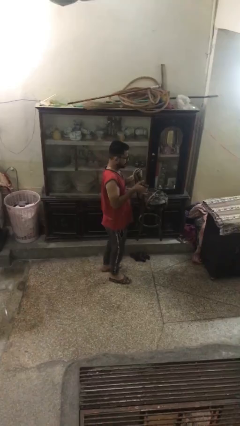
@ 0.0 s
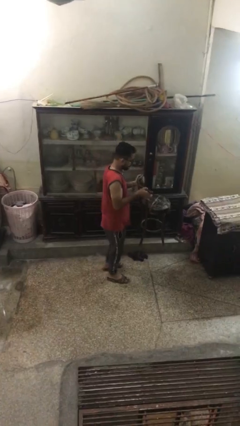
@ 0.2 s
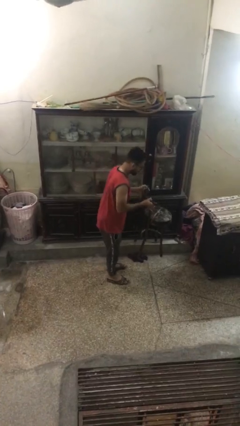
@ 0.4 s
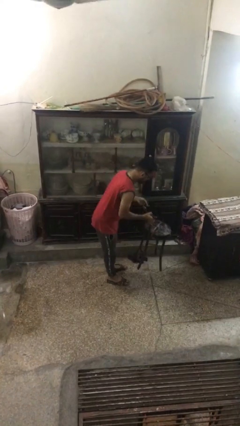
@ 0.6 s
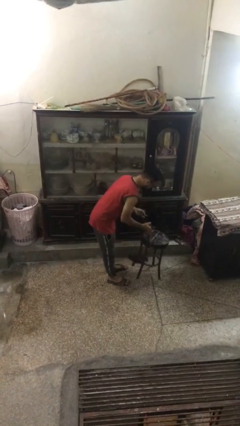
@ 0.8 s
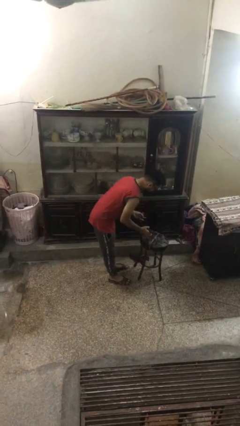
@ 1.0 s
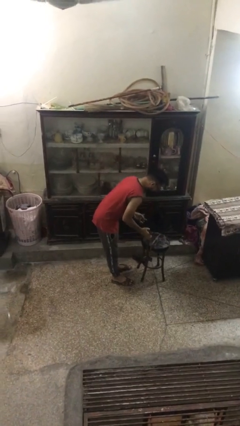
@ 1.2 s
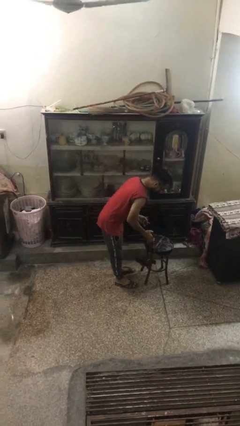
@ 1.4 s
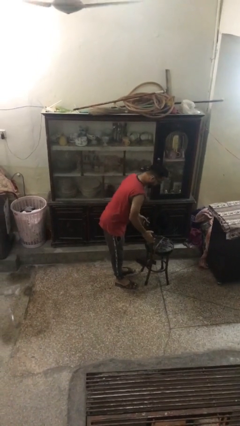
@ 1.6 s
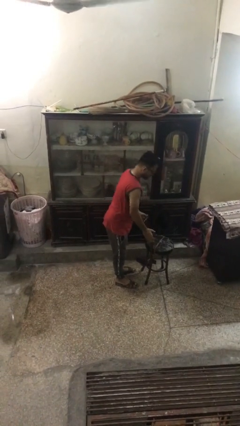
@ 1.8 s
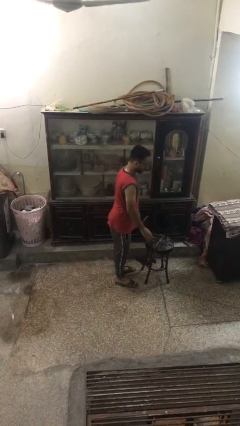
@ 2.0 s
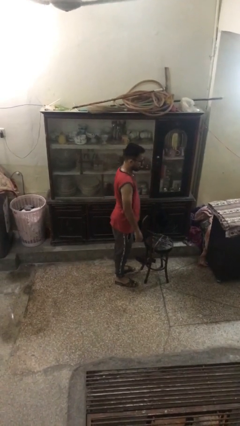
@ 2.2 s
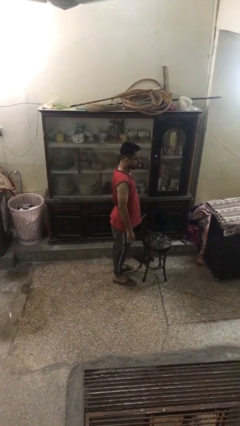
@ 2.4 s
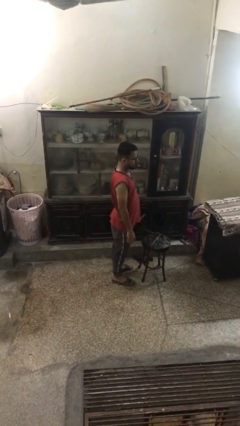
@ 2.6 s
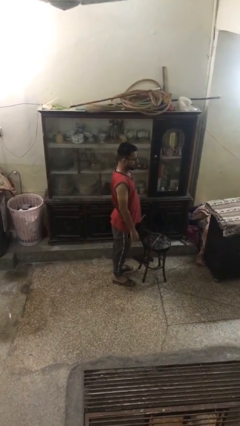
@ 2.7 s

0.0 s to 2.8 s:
person puts down object on floor

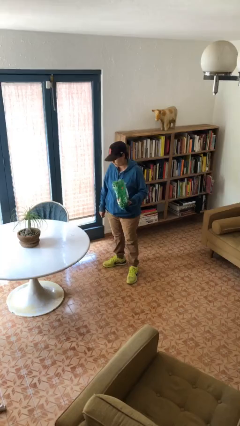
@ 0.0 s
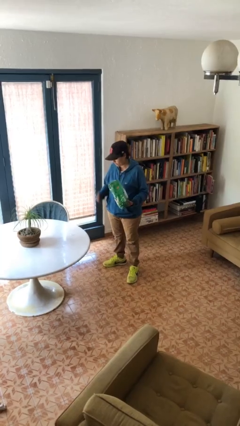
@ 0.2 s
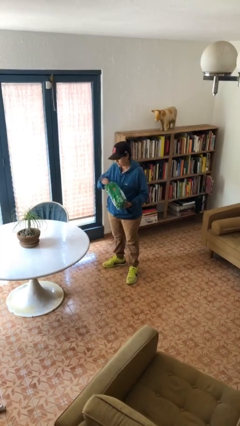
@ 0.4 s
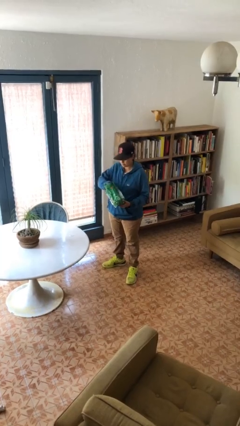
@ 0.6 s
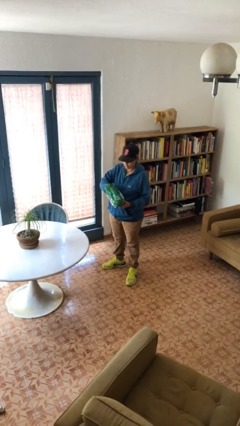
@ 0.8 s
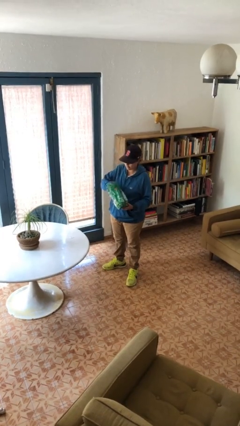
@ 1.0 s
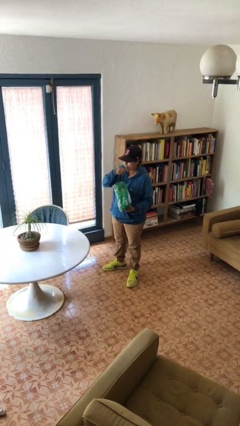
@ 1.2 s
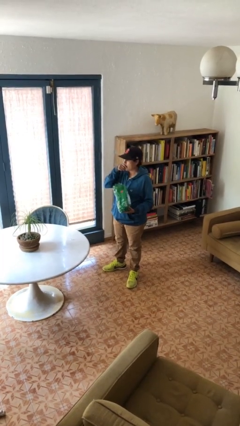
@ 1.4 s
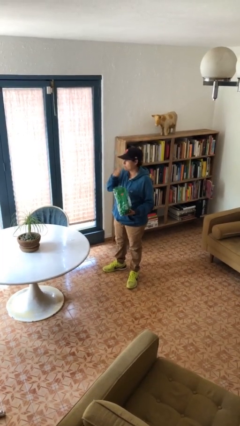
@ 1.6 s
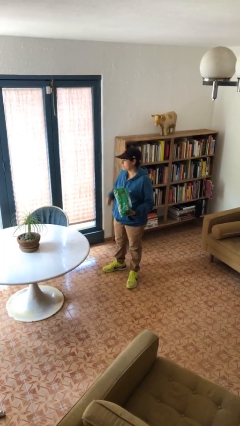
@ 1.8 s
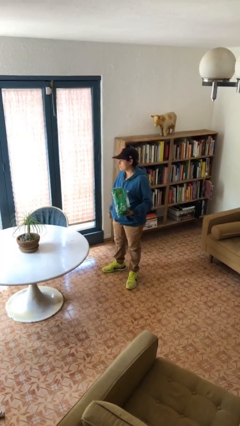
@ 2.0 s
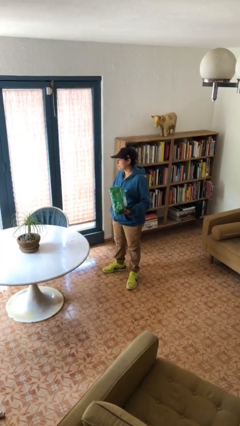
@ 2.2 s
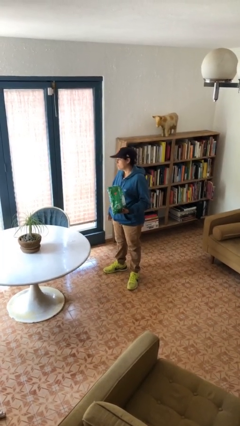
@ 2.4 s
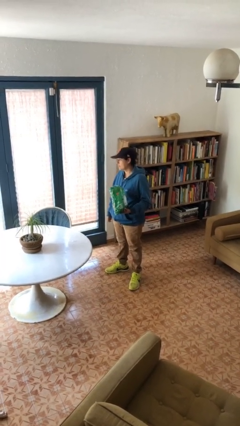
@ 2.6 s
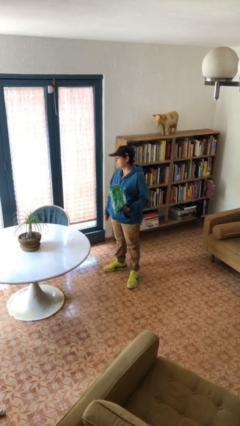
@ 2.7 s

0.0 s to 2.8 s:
person eats snack from bag

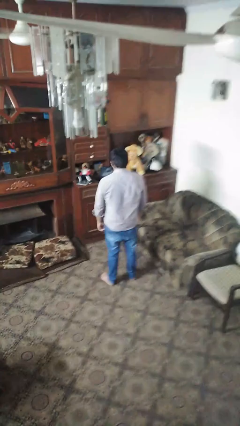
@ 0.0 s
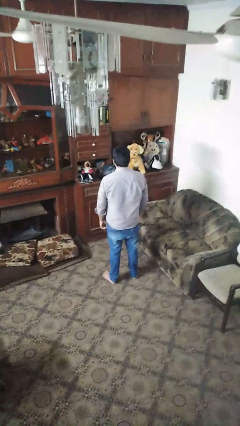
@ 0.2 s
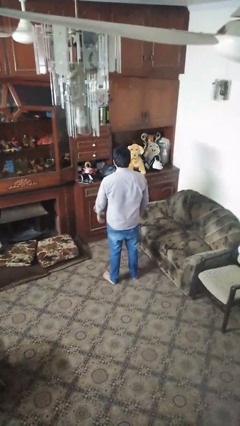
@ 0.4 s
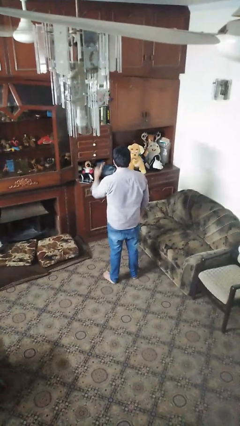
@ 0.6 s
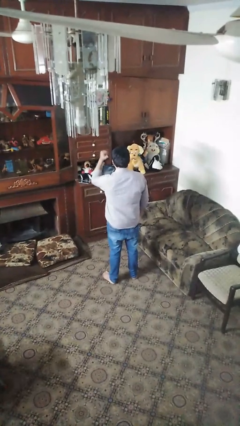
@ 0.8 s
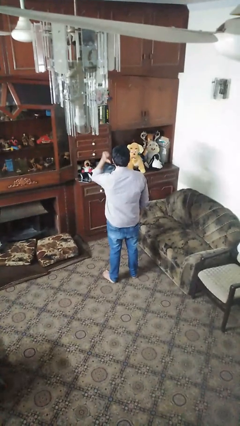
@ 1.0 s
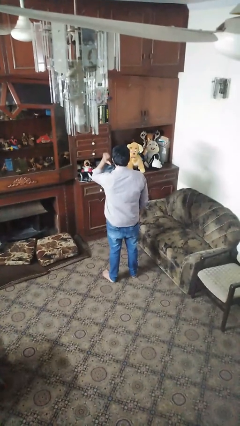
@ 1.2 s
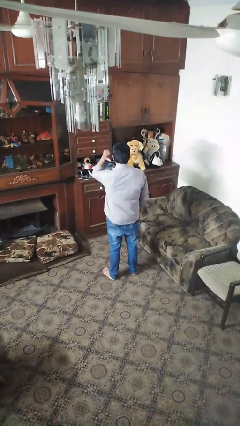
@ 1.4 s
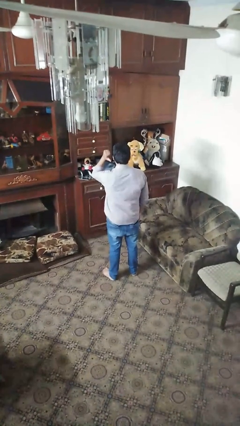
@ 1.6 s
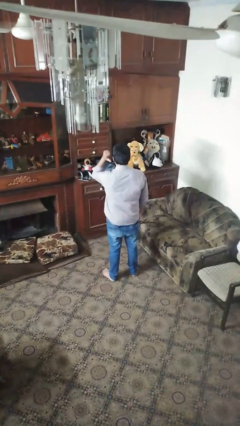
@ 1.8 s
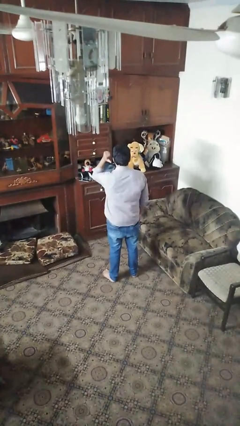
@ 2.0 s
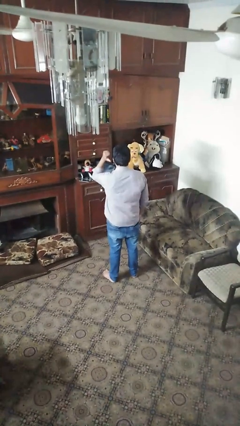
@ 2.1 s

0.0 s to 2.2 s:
person gestures behind me

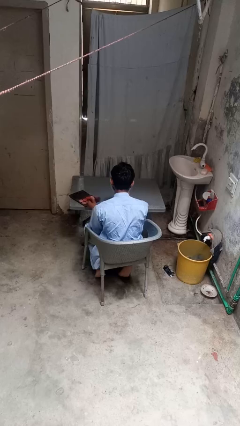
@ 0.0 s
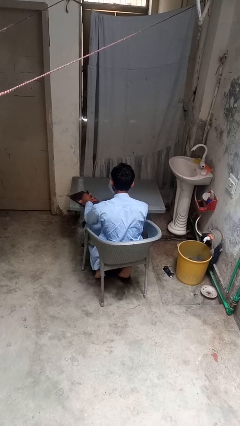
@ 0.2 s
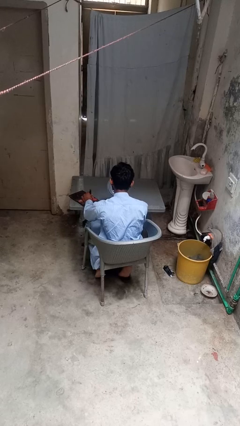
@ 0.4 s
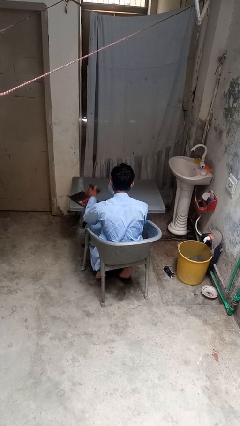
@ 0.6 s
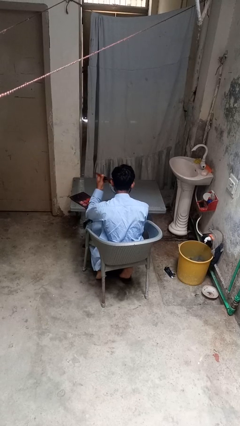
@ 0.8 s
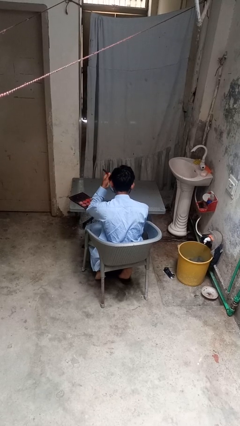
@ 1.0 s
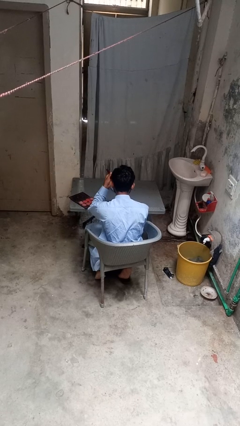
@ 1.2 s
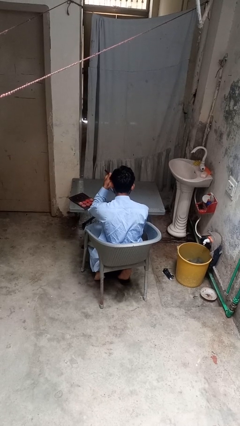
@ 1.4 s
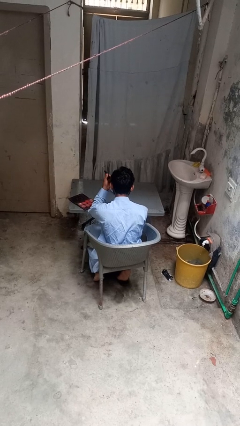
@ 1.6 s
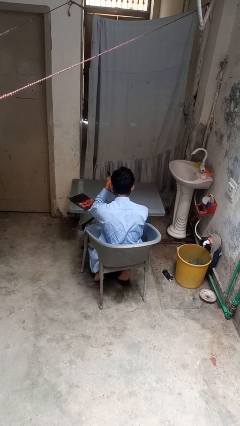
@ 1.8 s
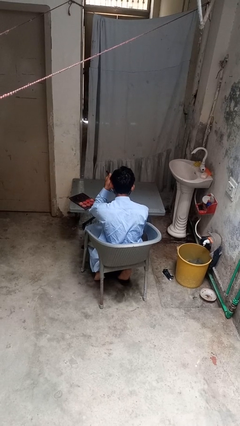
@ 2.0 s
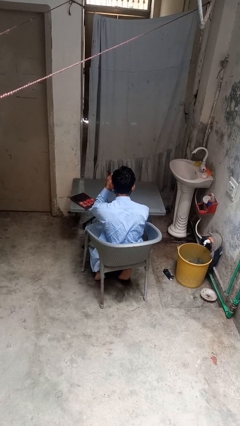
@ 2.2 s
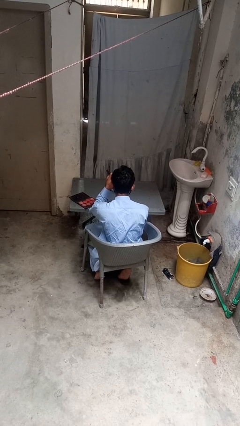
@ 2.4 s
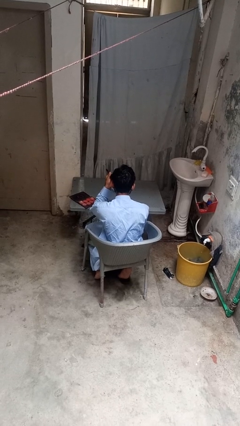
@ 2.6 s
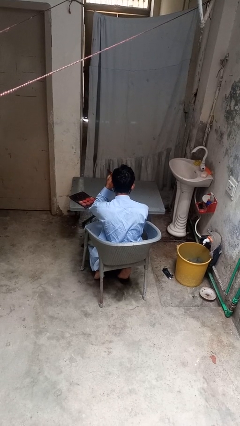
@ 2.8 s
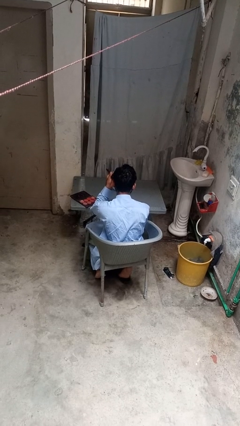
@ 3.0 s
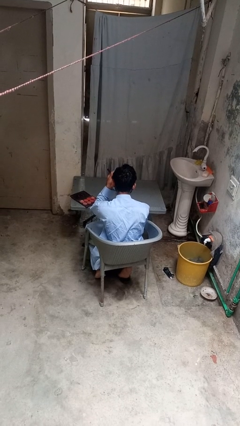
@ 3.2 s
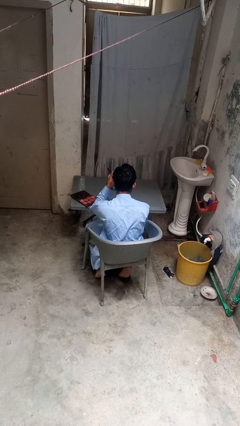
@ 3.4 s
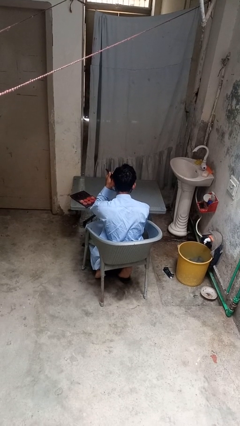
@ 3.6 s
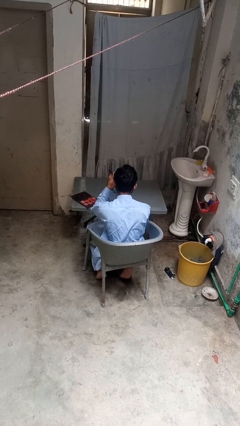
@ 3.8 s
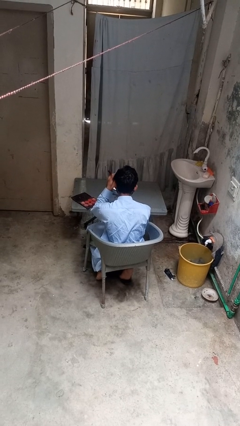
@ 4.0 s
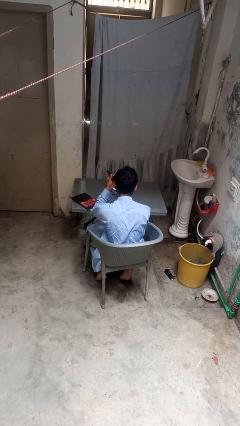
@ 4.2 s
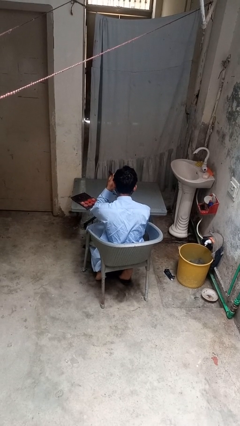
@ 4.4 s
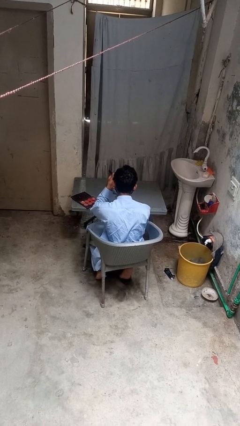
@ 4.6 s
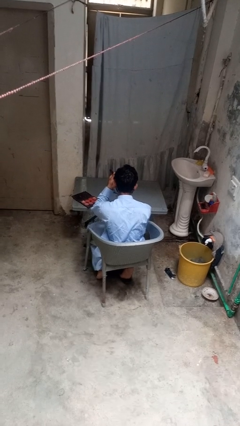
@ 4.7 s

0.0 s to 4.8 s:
person applies eye makeup

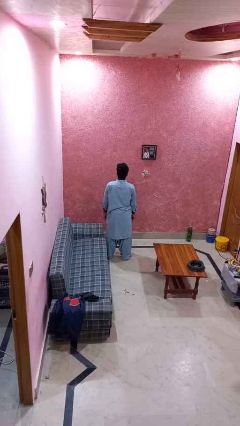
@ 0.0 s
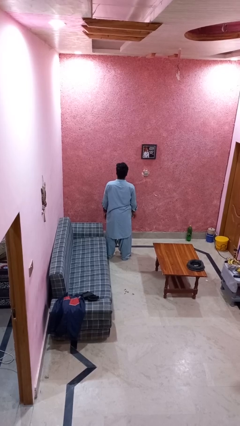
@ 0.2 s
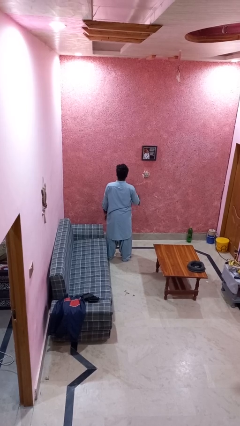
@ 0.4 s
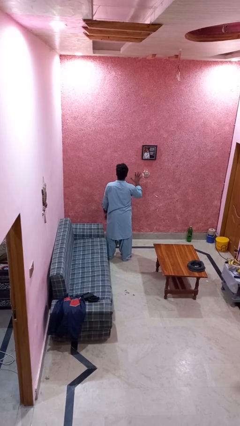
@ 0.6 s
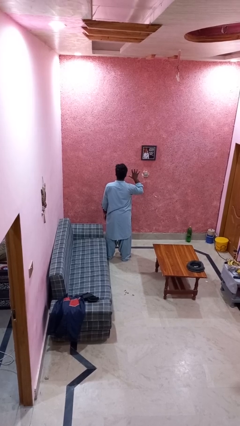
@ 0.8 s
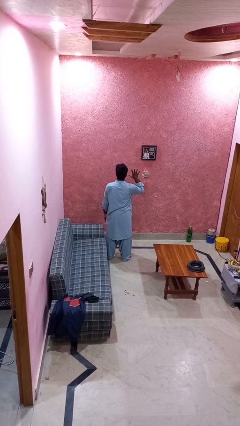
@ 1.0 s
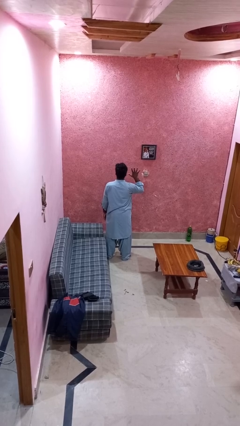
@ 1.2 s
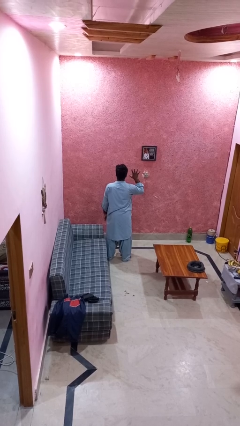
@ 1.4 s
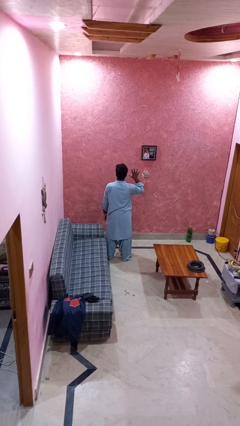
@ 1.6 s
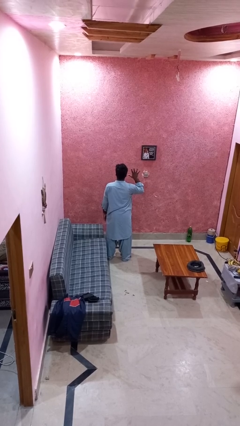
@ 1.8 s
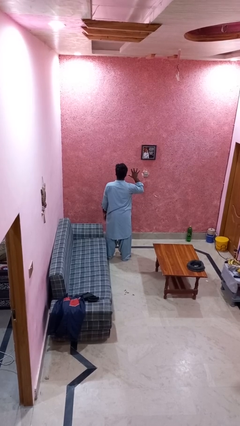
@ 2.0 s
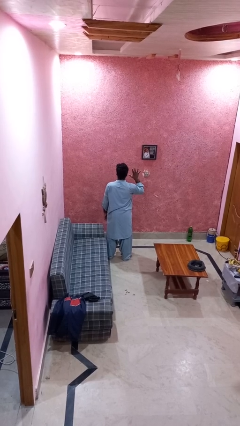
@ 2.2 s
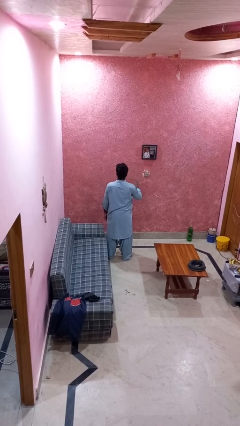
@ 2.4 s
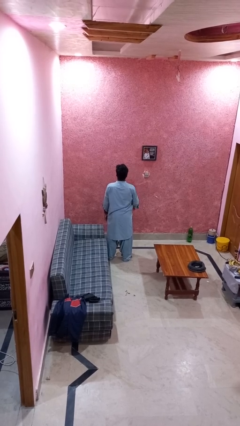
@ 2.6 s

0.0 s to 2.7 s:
person gestures number five

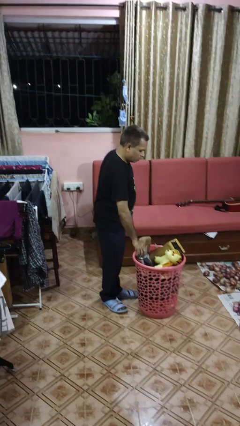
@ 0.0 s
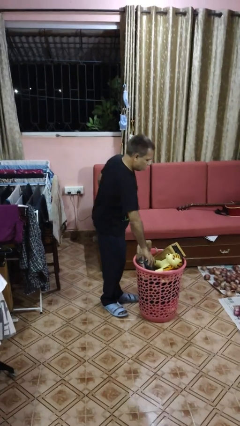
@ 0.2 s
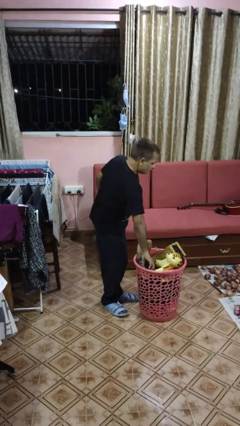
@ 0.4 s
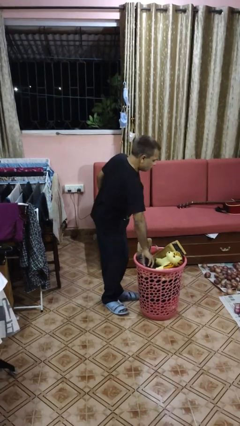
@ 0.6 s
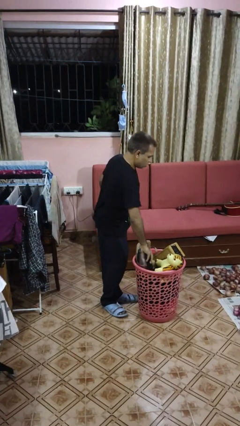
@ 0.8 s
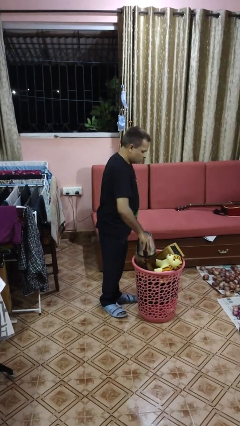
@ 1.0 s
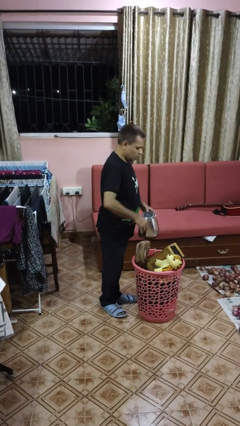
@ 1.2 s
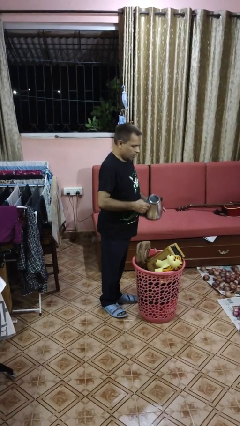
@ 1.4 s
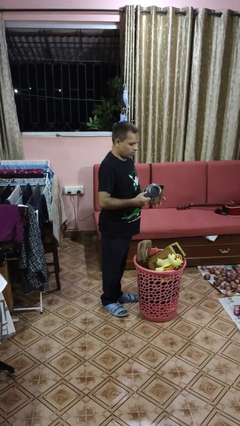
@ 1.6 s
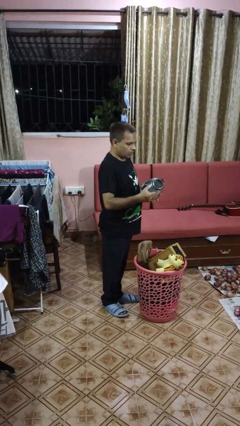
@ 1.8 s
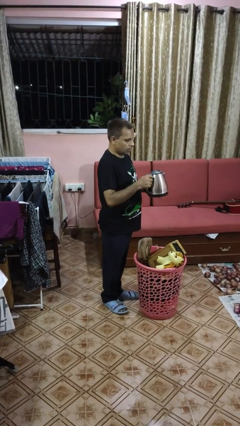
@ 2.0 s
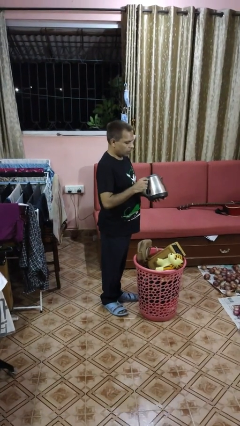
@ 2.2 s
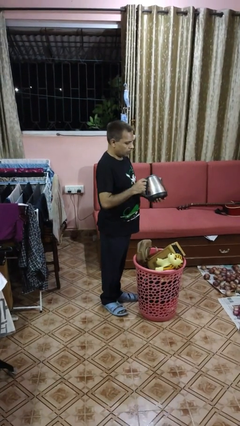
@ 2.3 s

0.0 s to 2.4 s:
person takes object from basket
